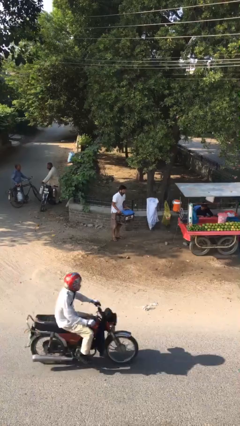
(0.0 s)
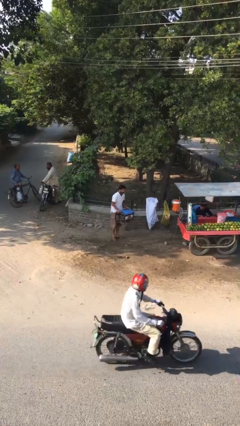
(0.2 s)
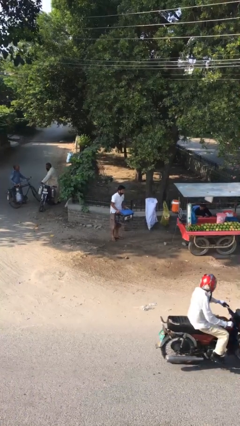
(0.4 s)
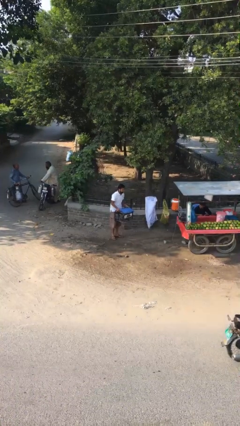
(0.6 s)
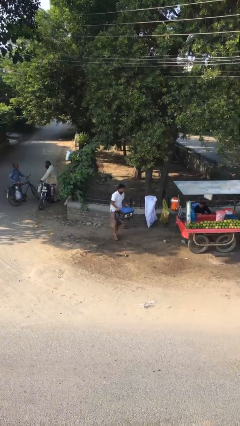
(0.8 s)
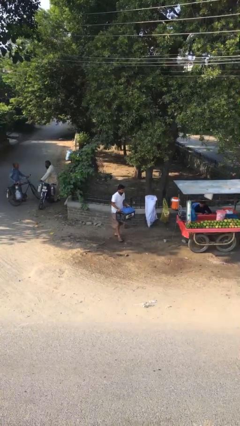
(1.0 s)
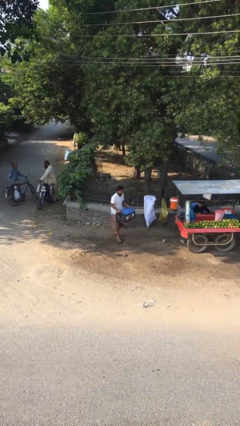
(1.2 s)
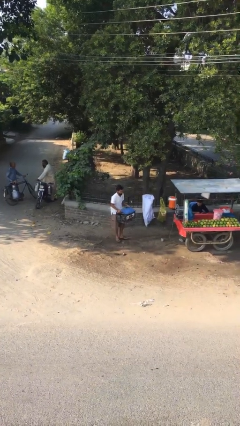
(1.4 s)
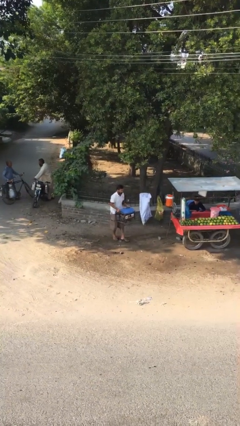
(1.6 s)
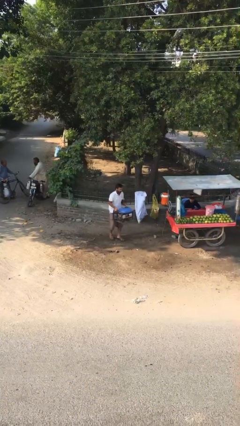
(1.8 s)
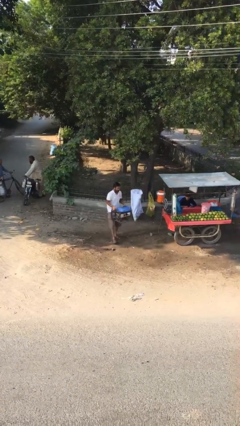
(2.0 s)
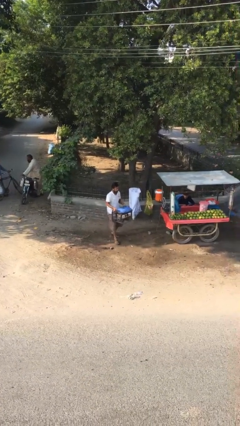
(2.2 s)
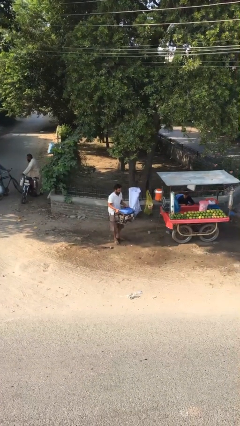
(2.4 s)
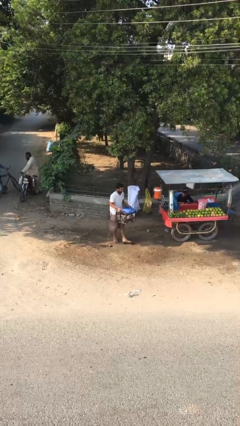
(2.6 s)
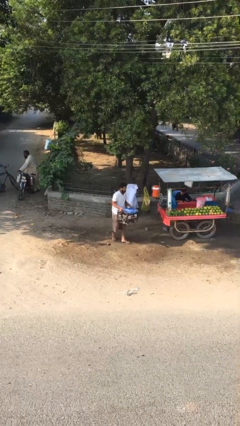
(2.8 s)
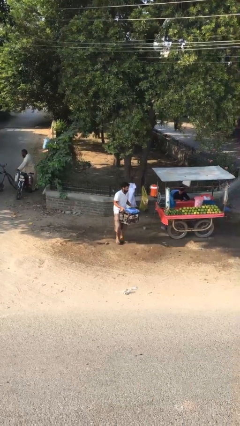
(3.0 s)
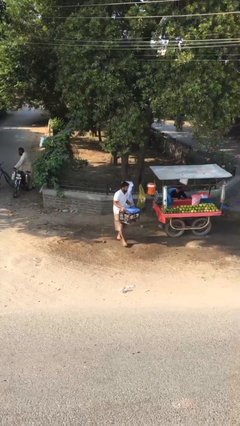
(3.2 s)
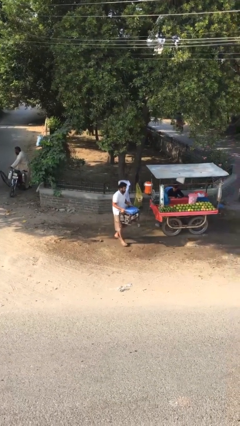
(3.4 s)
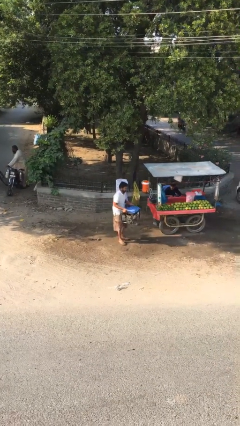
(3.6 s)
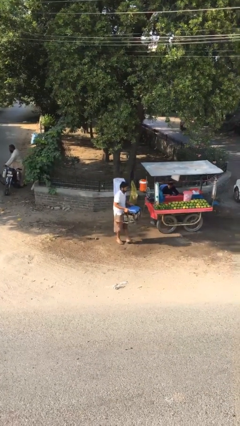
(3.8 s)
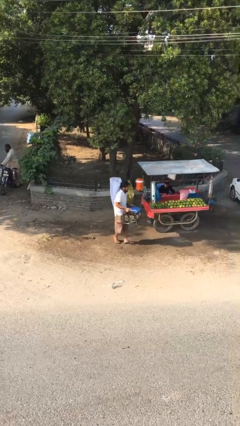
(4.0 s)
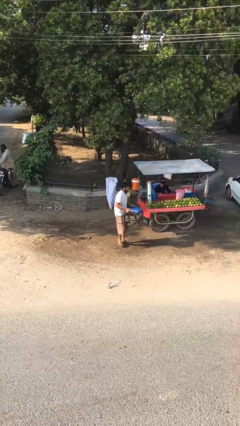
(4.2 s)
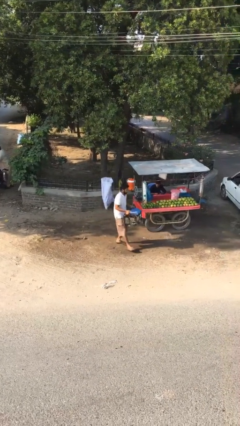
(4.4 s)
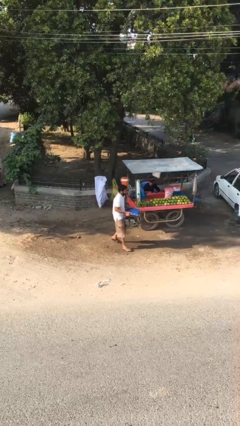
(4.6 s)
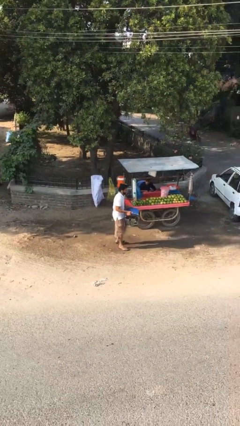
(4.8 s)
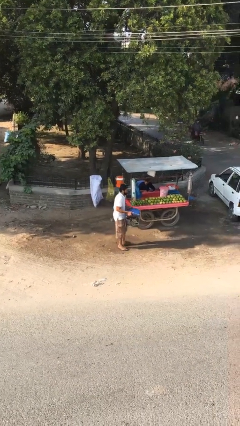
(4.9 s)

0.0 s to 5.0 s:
person carries heavy object

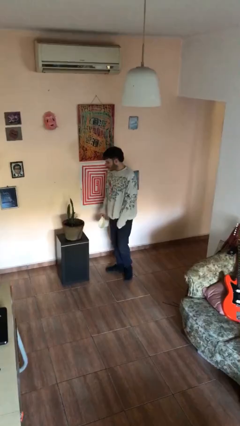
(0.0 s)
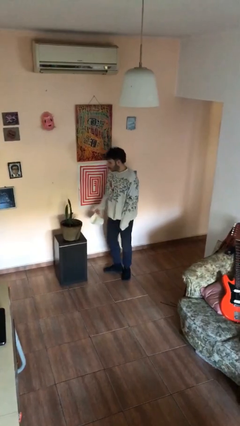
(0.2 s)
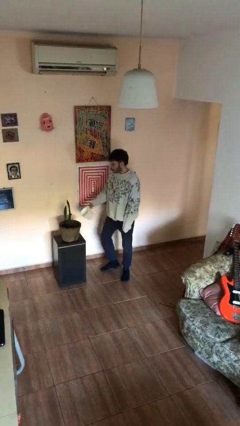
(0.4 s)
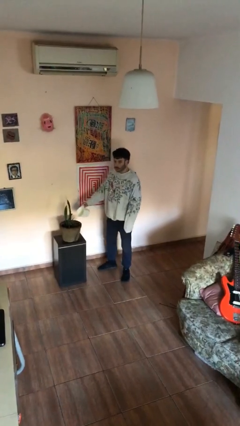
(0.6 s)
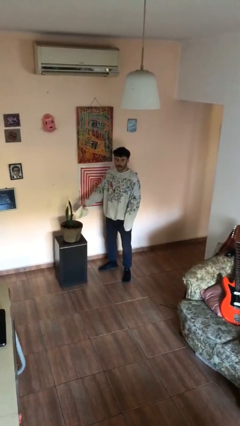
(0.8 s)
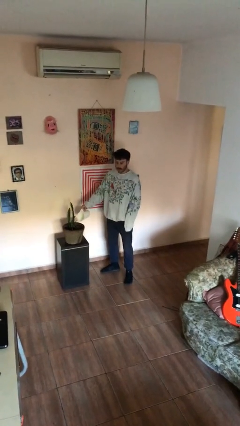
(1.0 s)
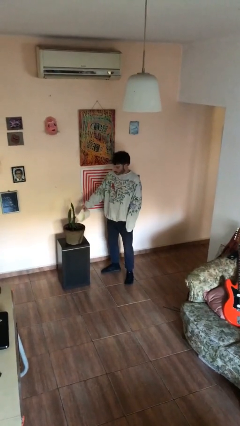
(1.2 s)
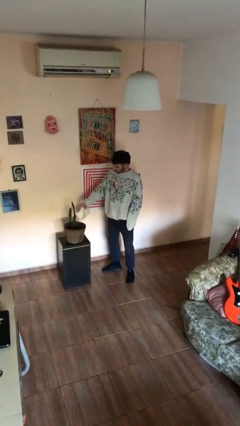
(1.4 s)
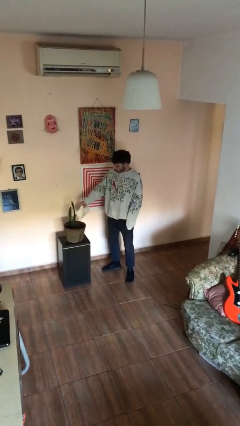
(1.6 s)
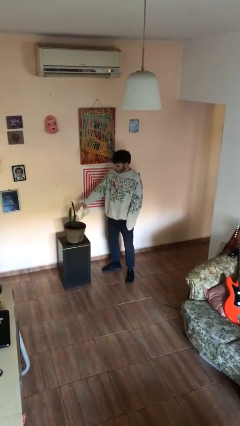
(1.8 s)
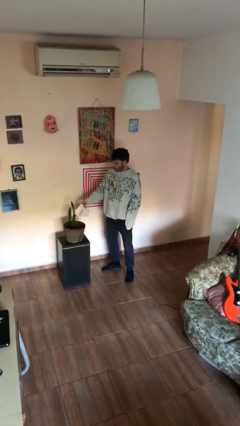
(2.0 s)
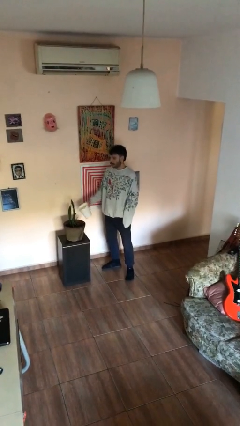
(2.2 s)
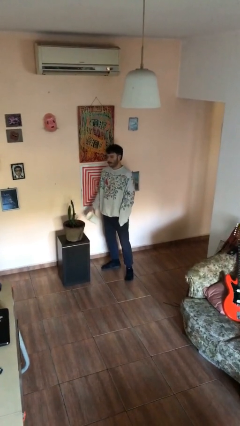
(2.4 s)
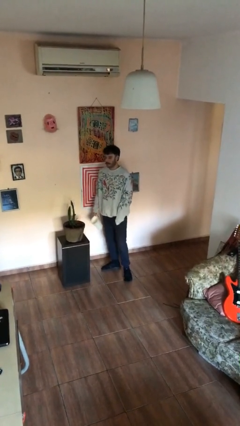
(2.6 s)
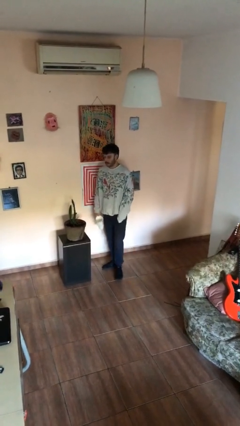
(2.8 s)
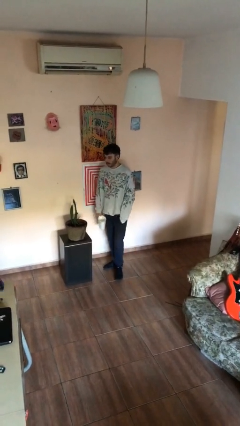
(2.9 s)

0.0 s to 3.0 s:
person waters houseplant

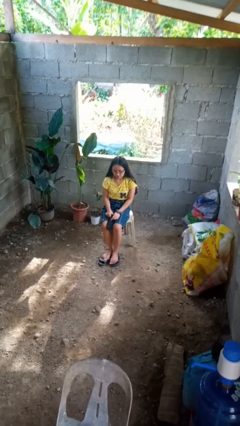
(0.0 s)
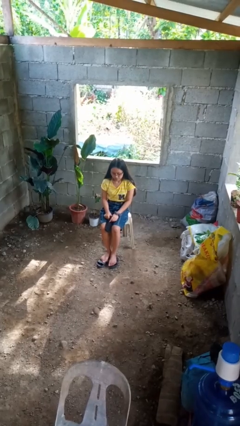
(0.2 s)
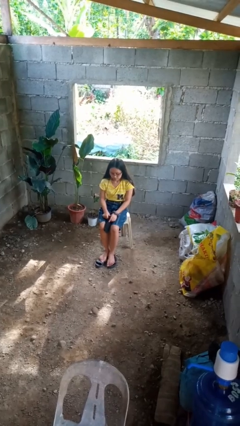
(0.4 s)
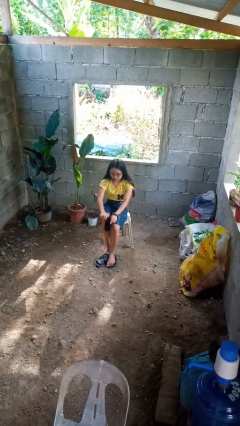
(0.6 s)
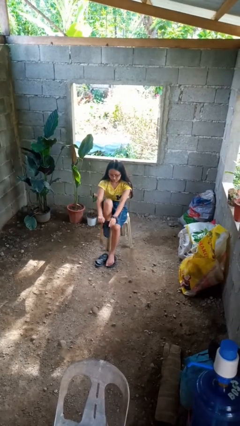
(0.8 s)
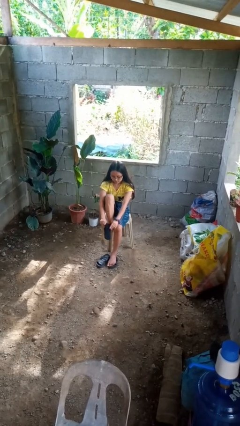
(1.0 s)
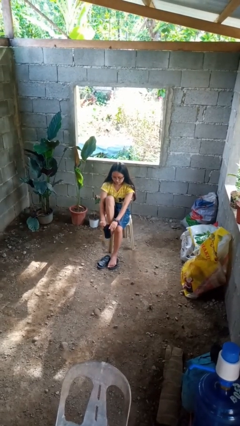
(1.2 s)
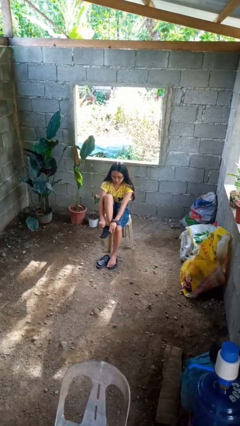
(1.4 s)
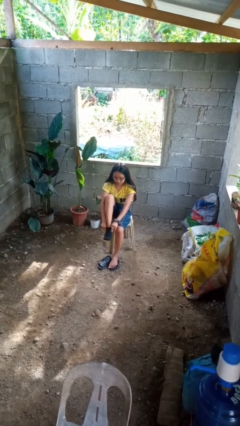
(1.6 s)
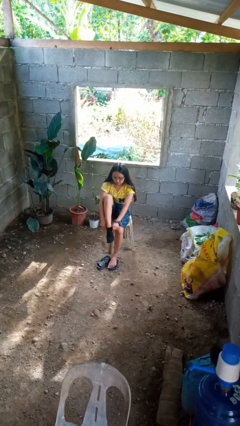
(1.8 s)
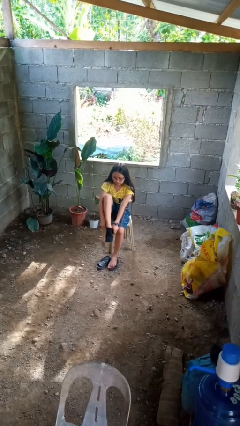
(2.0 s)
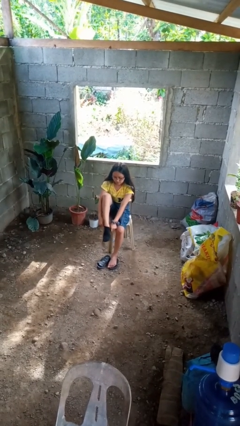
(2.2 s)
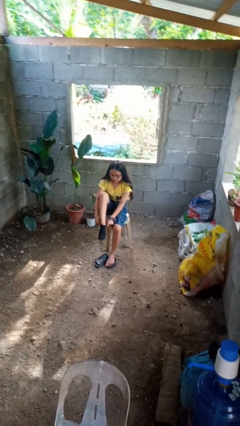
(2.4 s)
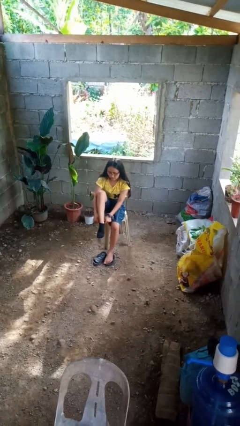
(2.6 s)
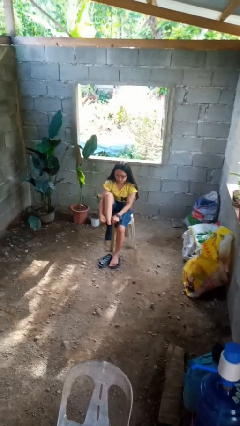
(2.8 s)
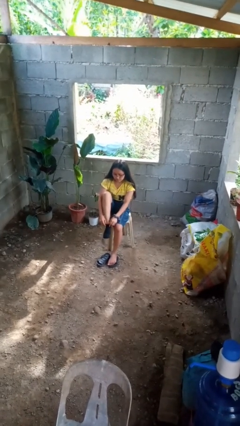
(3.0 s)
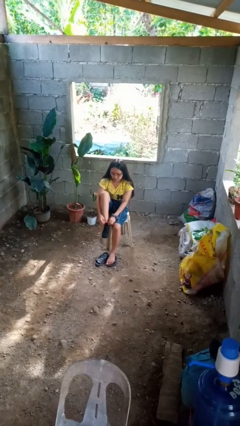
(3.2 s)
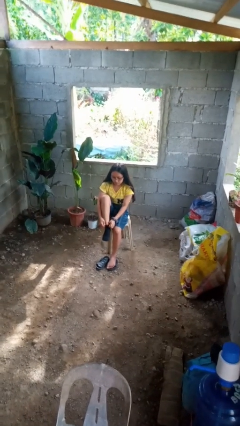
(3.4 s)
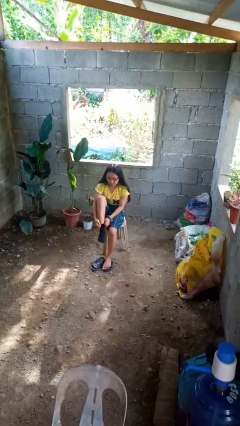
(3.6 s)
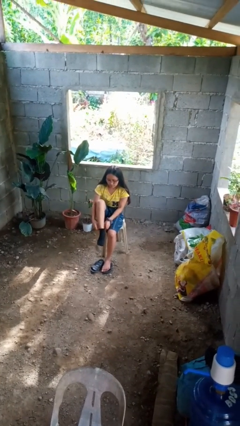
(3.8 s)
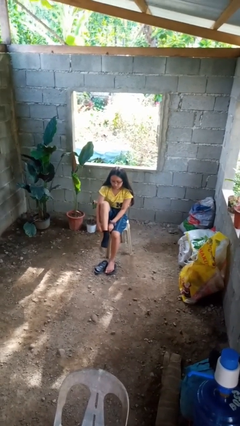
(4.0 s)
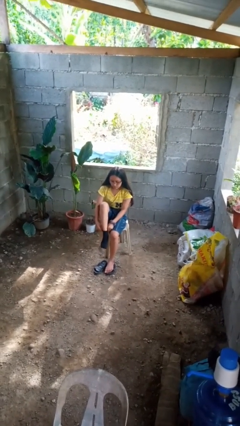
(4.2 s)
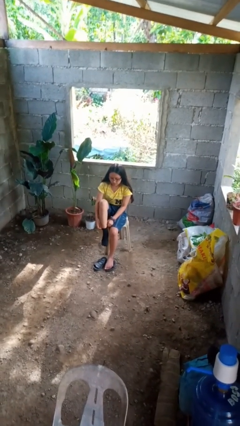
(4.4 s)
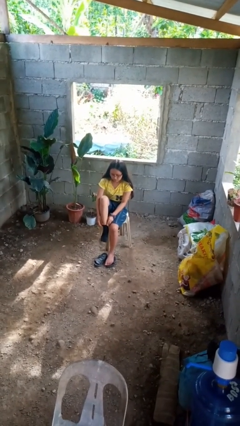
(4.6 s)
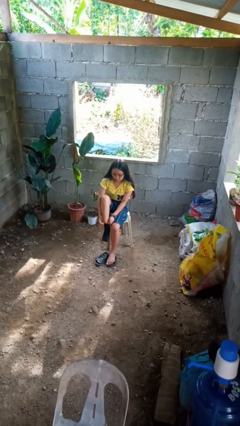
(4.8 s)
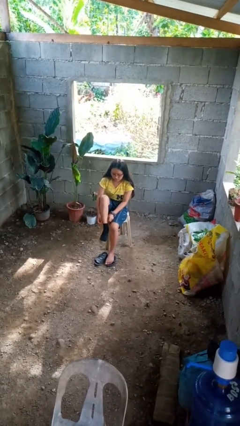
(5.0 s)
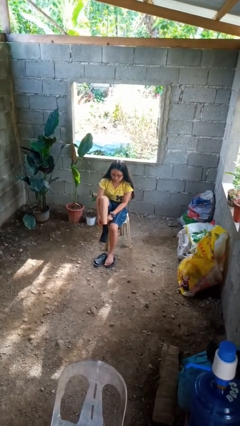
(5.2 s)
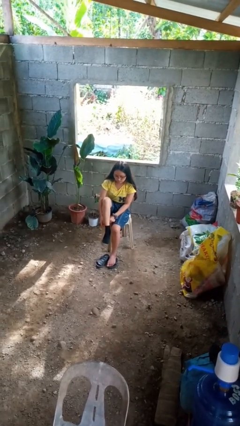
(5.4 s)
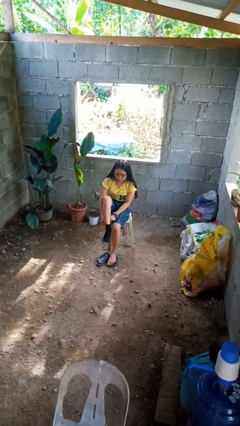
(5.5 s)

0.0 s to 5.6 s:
person puts on socks

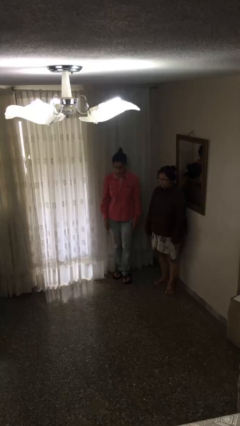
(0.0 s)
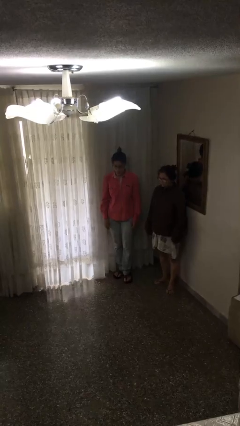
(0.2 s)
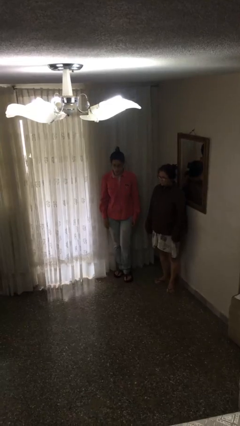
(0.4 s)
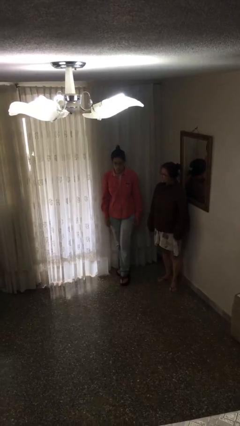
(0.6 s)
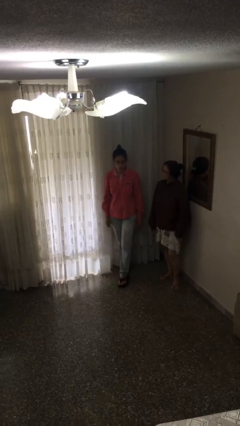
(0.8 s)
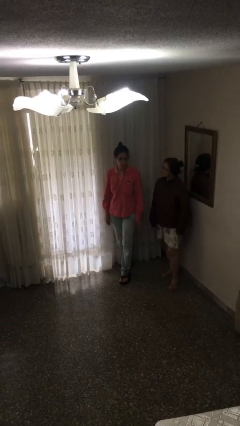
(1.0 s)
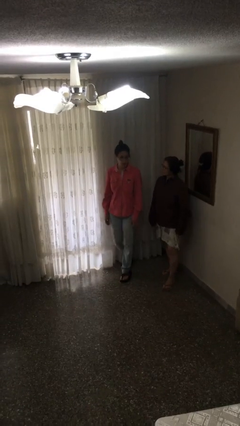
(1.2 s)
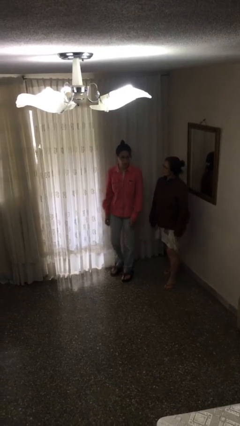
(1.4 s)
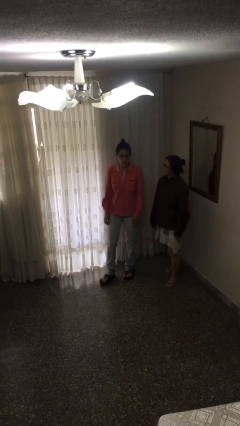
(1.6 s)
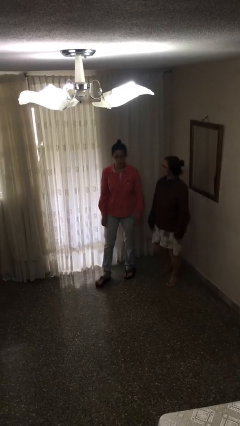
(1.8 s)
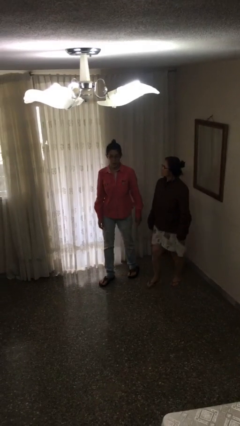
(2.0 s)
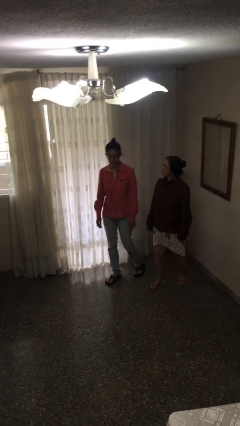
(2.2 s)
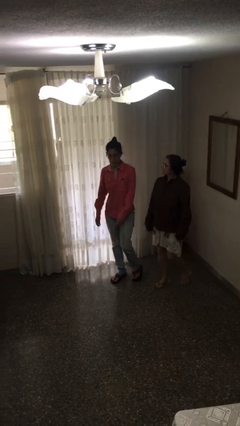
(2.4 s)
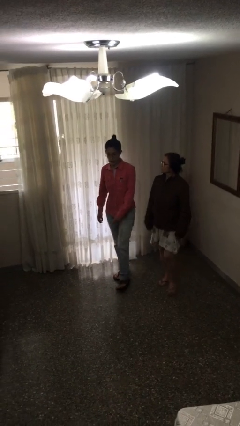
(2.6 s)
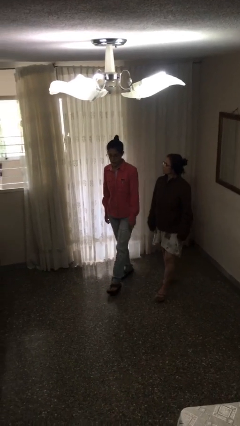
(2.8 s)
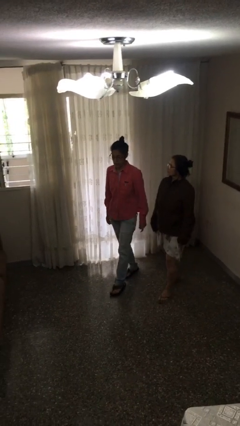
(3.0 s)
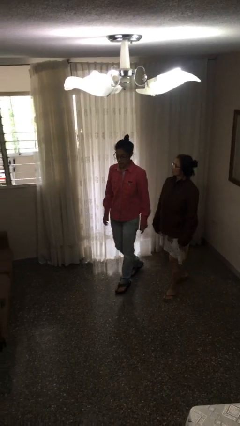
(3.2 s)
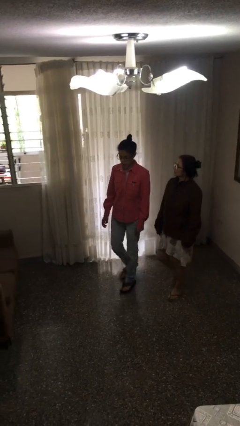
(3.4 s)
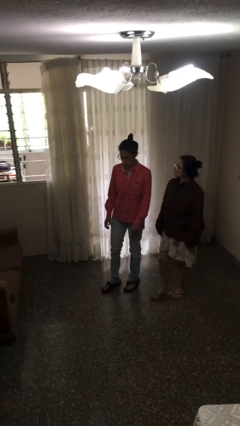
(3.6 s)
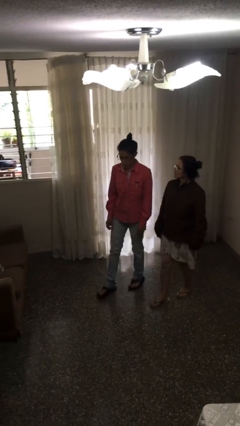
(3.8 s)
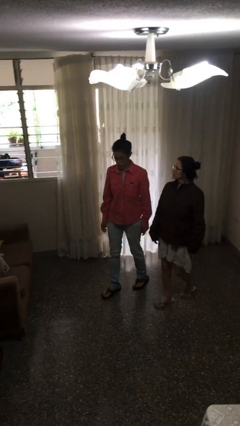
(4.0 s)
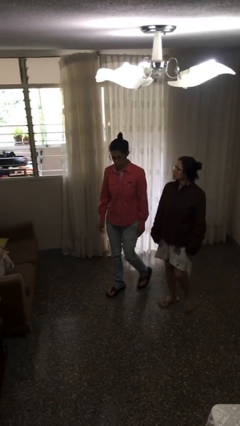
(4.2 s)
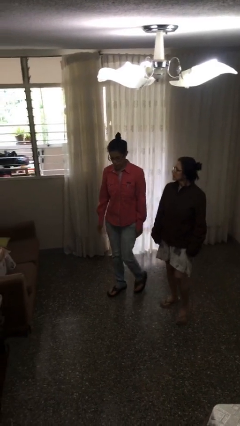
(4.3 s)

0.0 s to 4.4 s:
person talks to person
